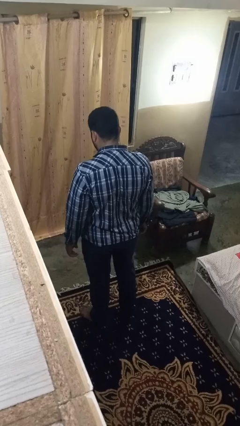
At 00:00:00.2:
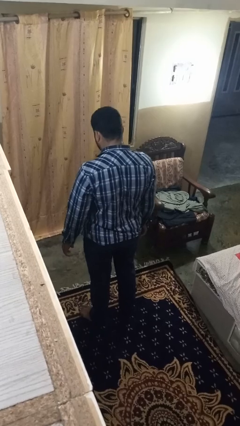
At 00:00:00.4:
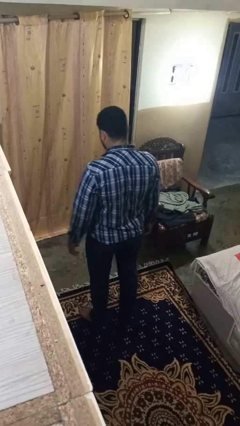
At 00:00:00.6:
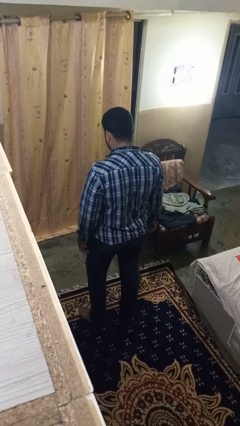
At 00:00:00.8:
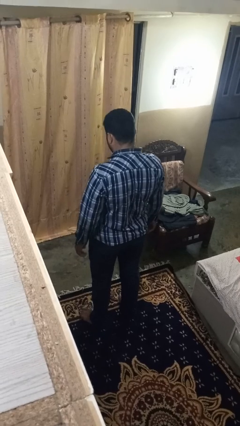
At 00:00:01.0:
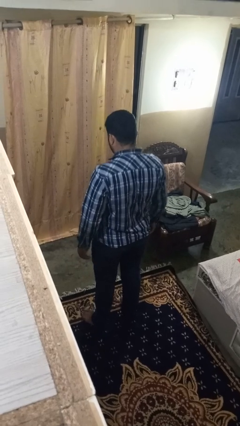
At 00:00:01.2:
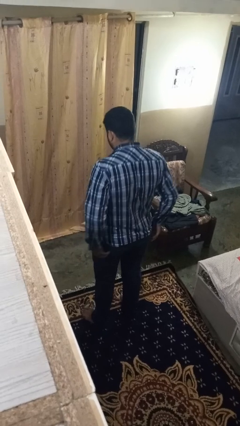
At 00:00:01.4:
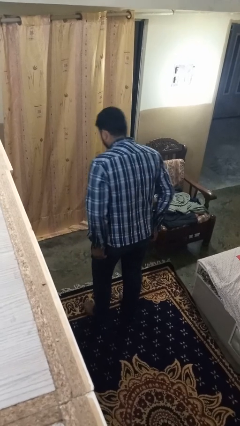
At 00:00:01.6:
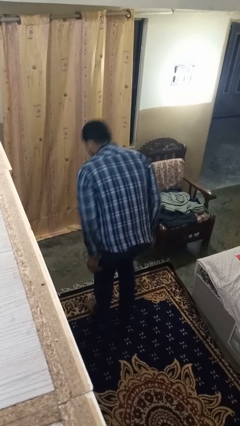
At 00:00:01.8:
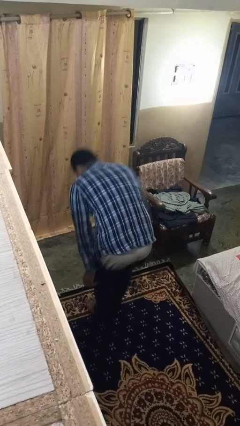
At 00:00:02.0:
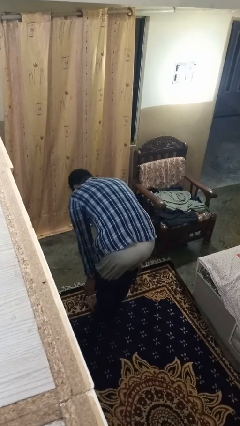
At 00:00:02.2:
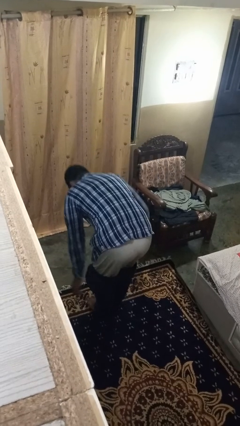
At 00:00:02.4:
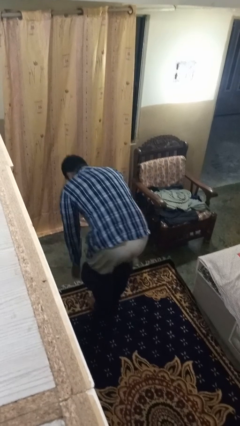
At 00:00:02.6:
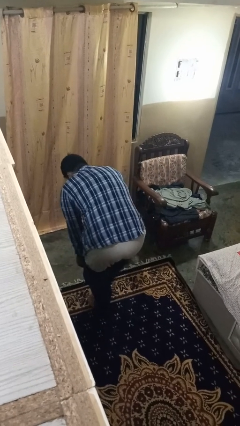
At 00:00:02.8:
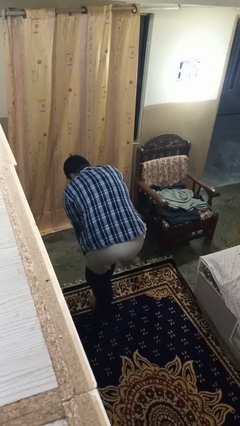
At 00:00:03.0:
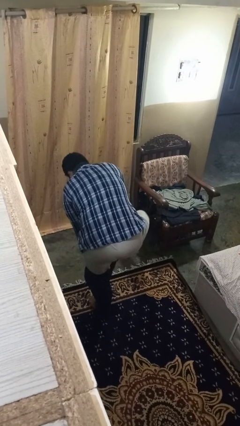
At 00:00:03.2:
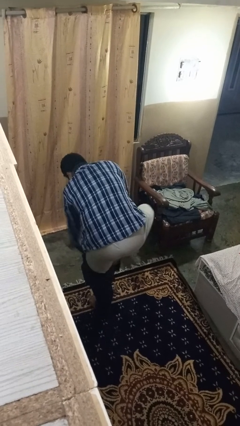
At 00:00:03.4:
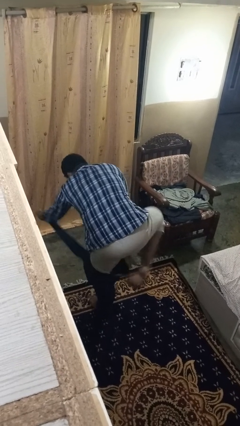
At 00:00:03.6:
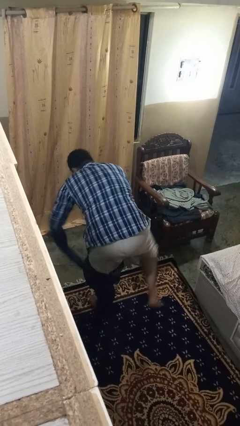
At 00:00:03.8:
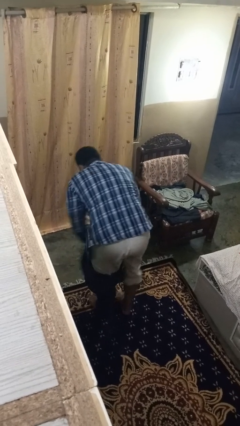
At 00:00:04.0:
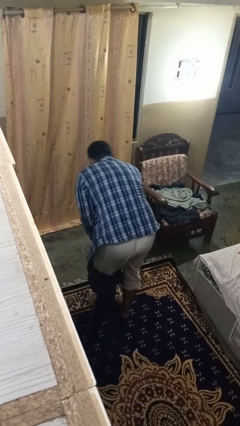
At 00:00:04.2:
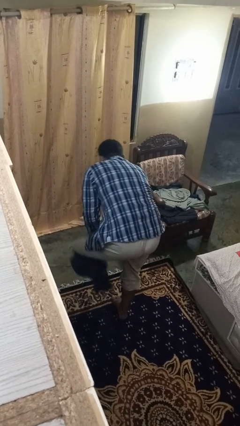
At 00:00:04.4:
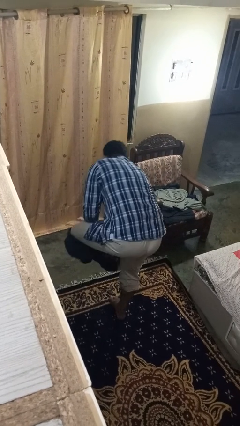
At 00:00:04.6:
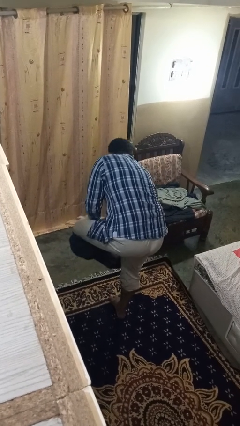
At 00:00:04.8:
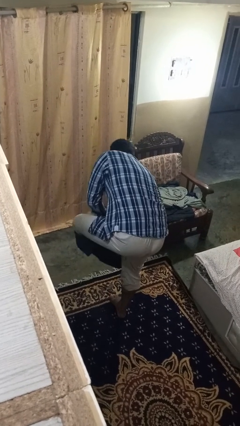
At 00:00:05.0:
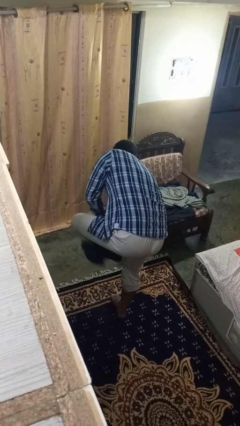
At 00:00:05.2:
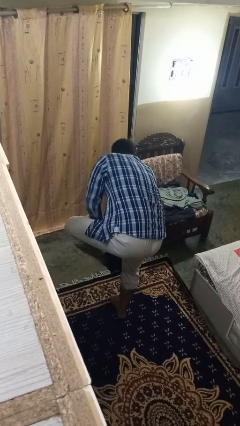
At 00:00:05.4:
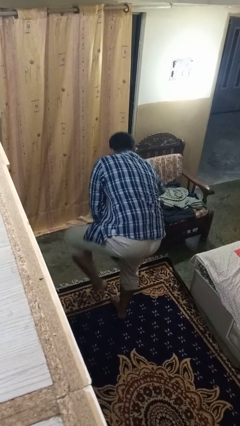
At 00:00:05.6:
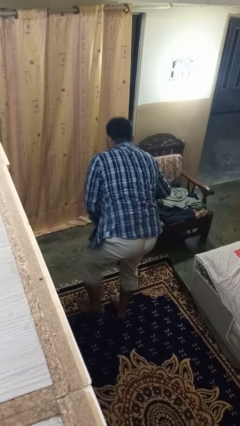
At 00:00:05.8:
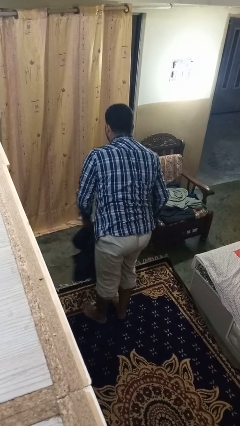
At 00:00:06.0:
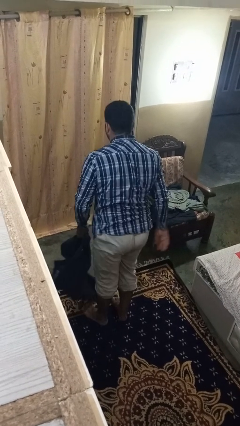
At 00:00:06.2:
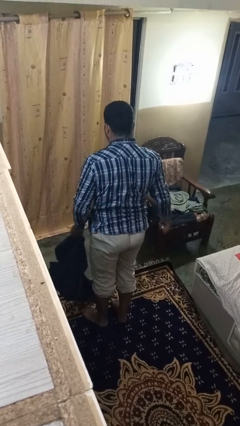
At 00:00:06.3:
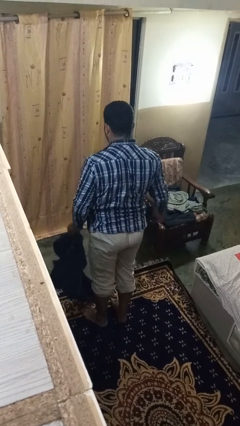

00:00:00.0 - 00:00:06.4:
person takes off pants

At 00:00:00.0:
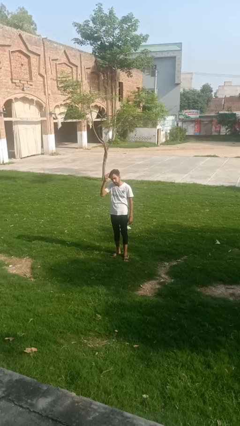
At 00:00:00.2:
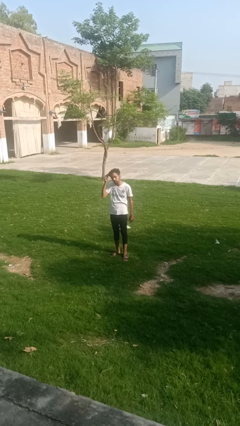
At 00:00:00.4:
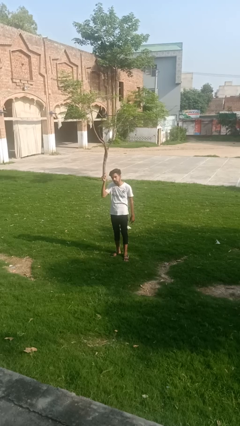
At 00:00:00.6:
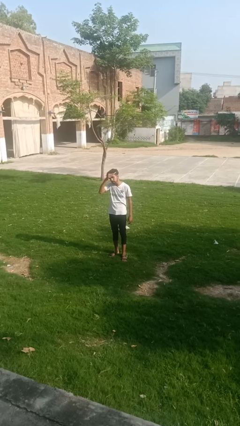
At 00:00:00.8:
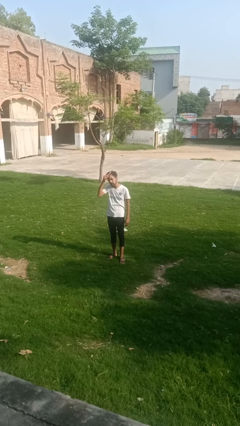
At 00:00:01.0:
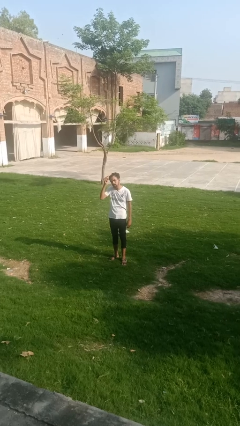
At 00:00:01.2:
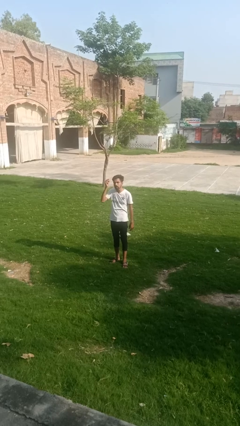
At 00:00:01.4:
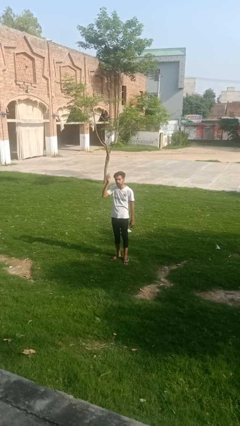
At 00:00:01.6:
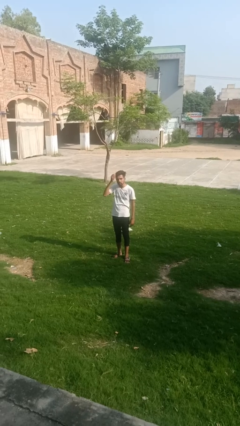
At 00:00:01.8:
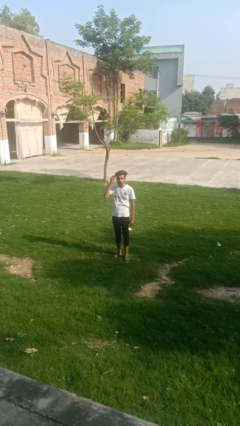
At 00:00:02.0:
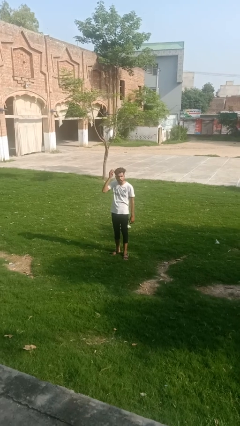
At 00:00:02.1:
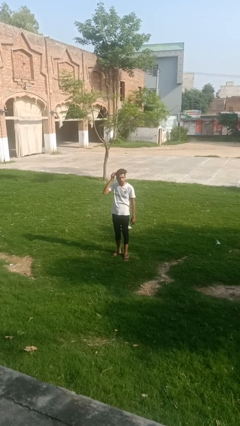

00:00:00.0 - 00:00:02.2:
person brushes hair

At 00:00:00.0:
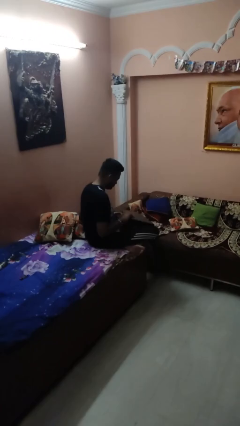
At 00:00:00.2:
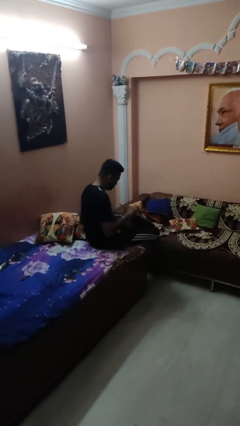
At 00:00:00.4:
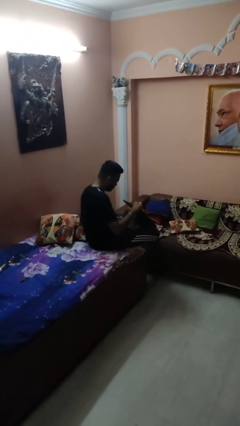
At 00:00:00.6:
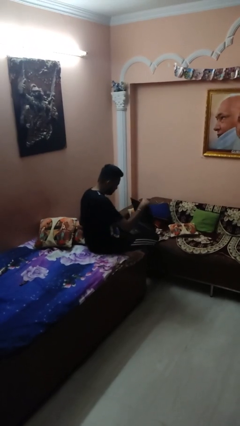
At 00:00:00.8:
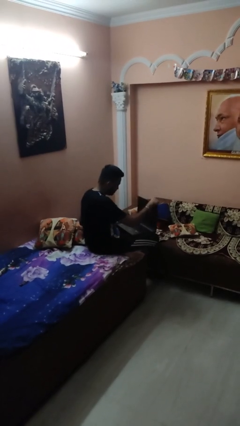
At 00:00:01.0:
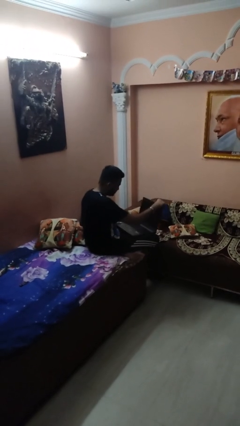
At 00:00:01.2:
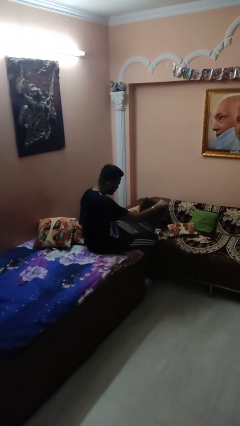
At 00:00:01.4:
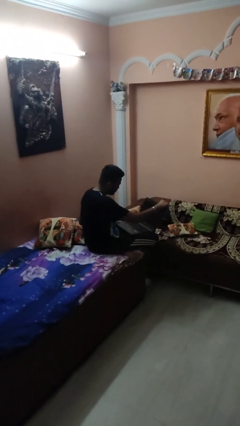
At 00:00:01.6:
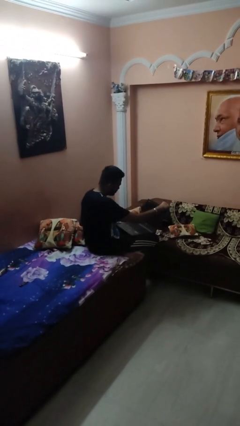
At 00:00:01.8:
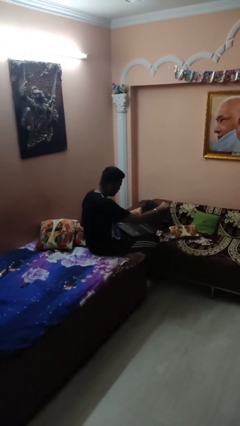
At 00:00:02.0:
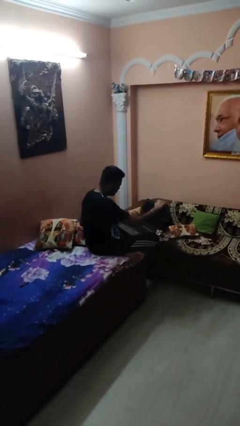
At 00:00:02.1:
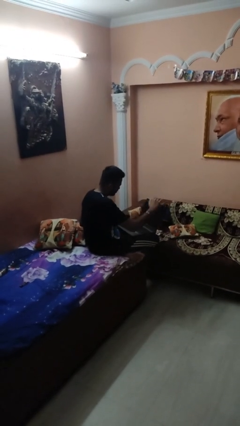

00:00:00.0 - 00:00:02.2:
person opens laptop

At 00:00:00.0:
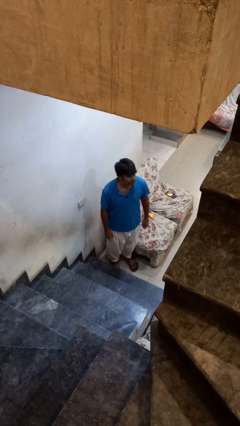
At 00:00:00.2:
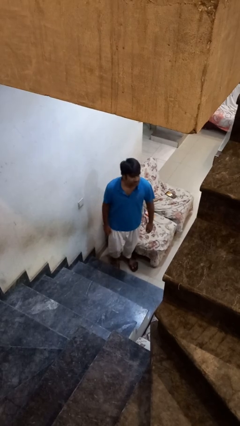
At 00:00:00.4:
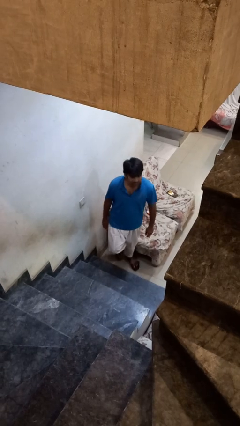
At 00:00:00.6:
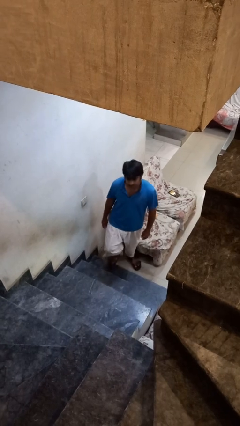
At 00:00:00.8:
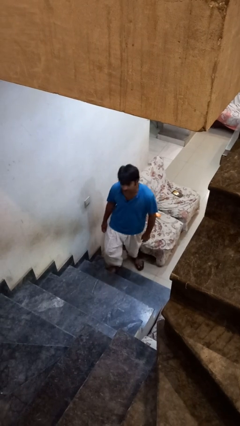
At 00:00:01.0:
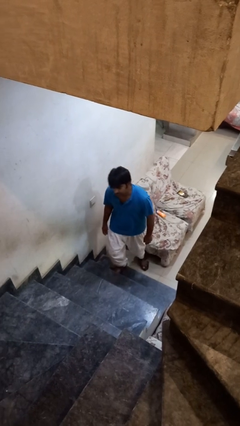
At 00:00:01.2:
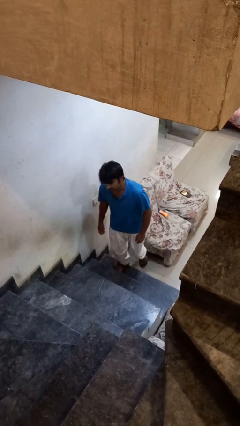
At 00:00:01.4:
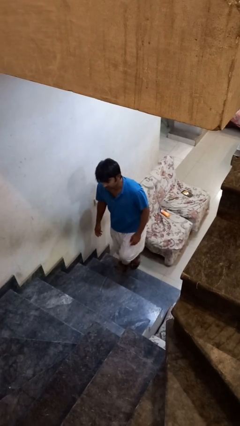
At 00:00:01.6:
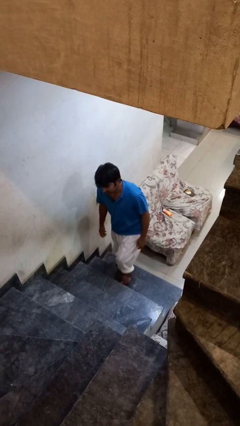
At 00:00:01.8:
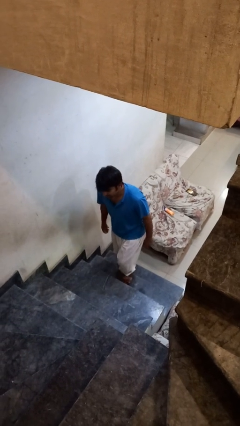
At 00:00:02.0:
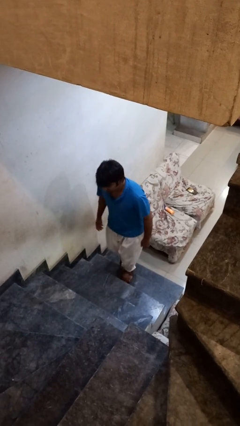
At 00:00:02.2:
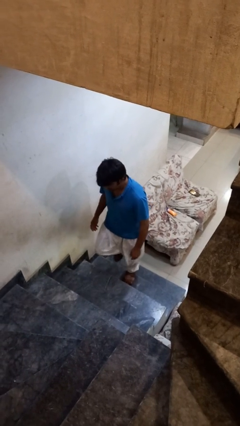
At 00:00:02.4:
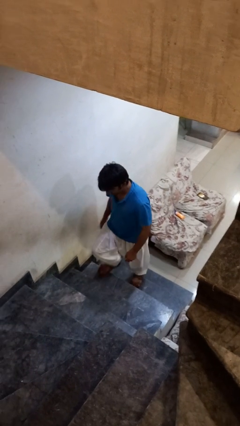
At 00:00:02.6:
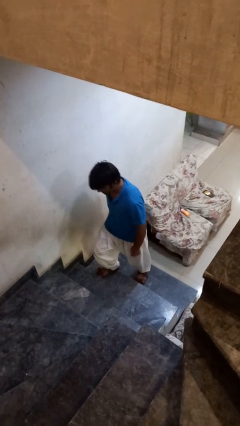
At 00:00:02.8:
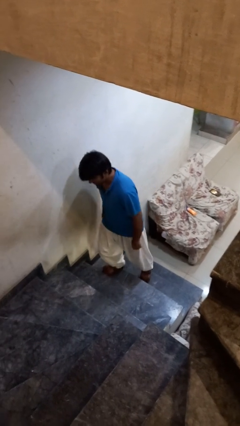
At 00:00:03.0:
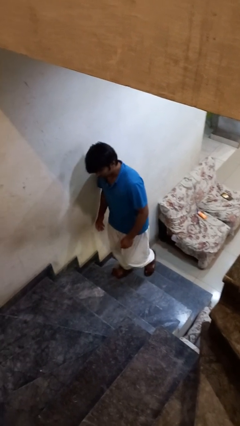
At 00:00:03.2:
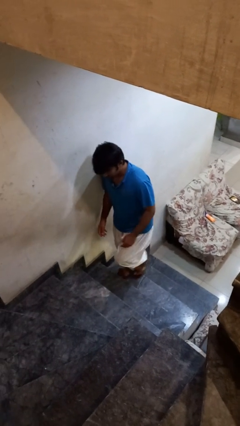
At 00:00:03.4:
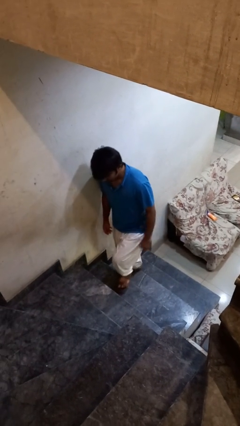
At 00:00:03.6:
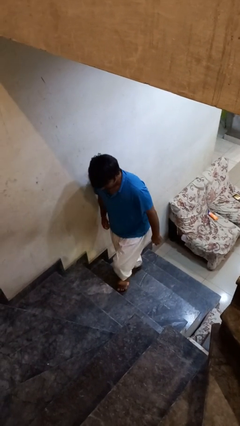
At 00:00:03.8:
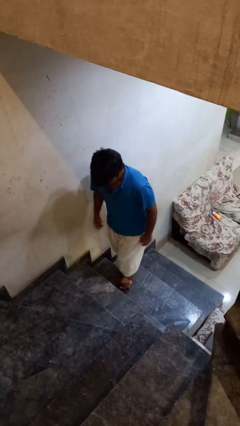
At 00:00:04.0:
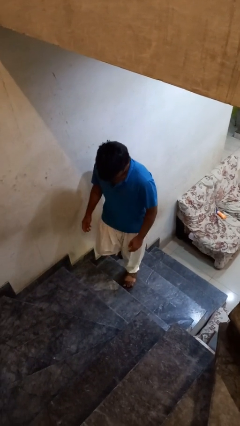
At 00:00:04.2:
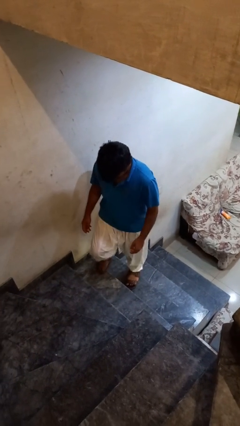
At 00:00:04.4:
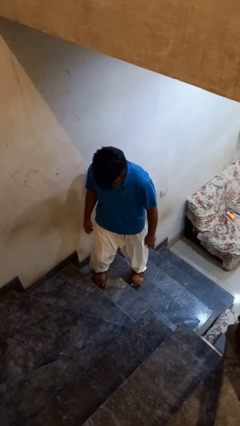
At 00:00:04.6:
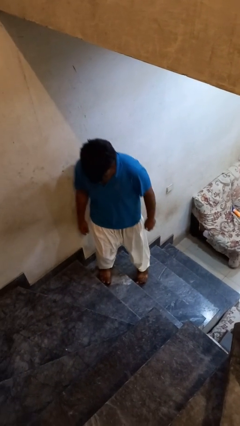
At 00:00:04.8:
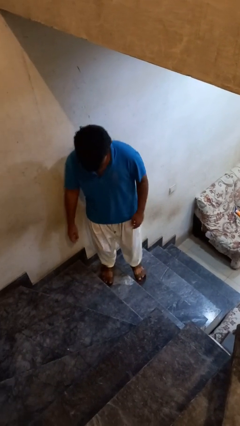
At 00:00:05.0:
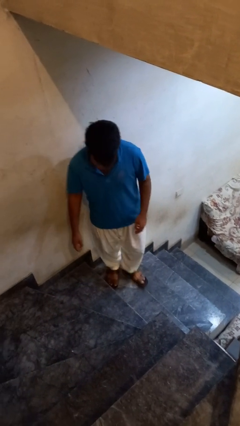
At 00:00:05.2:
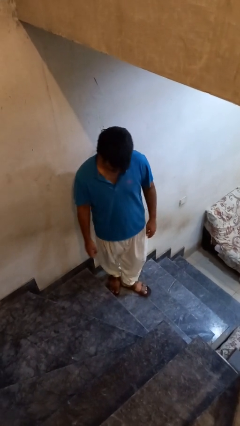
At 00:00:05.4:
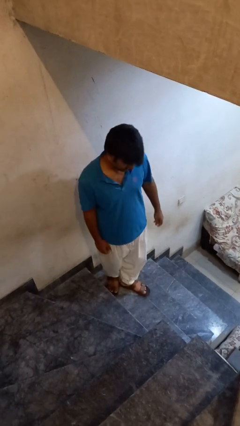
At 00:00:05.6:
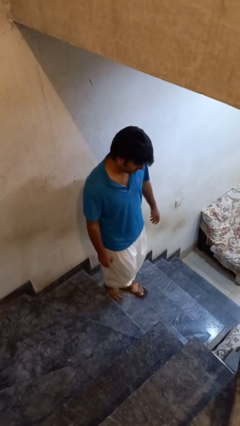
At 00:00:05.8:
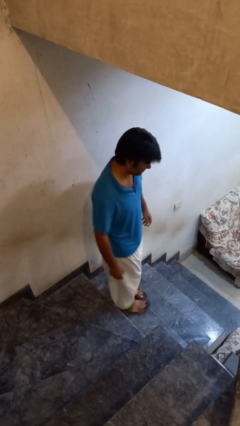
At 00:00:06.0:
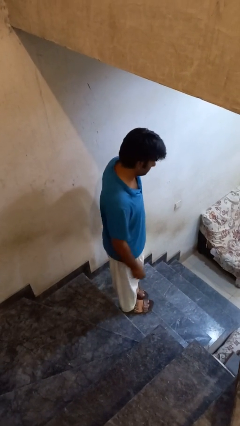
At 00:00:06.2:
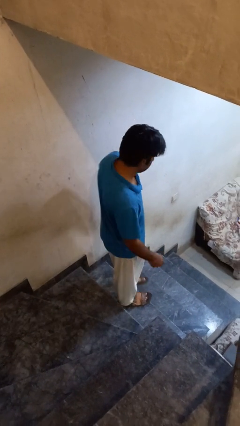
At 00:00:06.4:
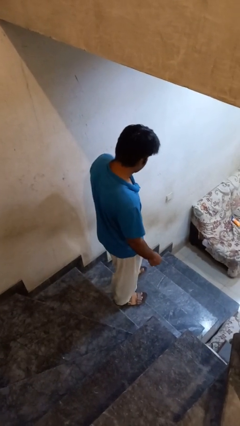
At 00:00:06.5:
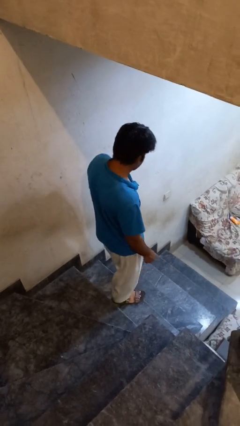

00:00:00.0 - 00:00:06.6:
person climbs up stairs

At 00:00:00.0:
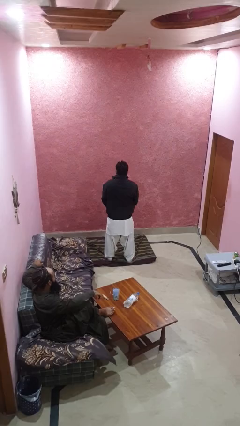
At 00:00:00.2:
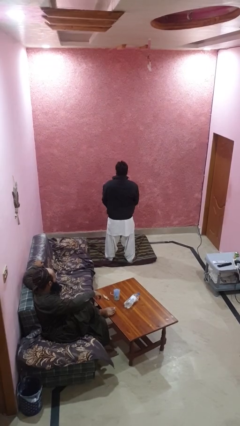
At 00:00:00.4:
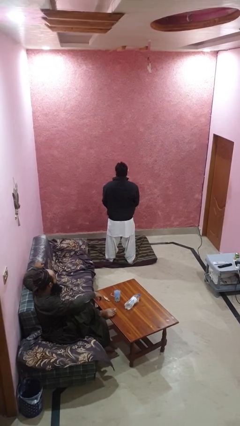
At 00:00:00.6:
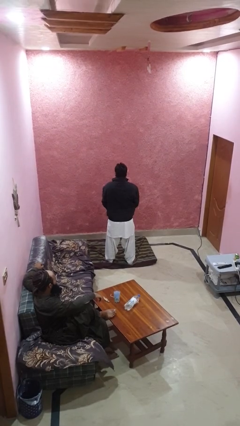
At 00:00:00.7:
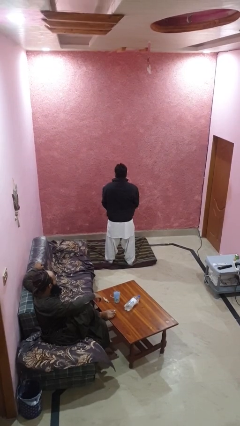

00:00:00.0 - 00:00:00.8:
person unzips jacket
